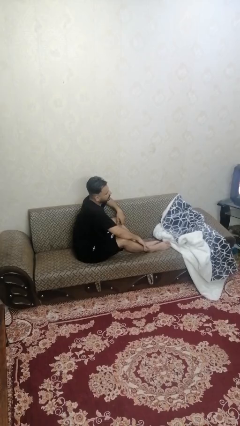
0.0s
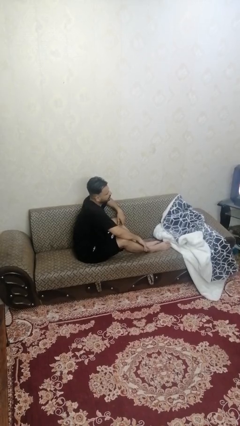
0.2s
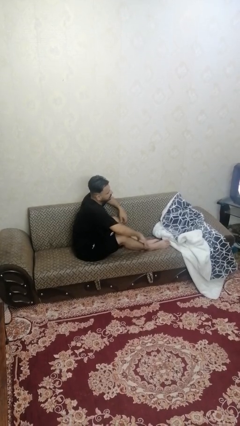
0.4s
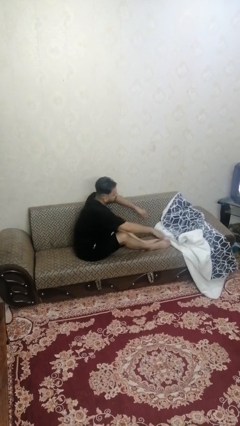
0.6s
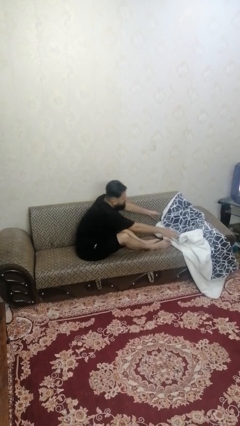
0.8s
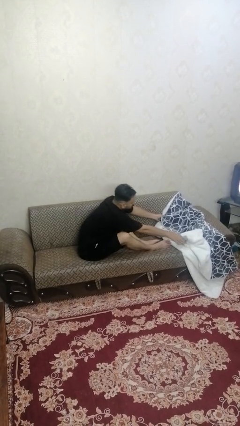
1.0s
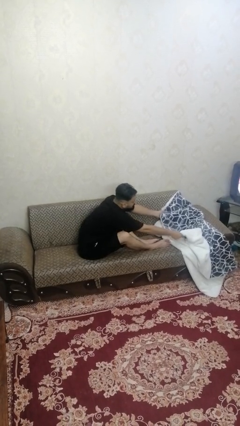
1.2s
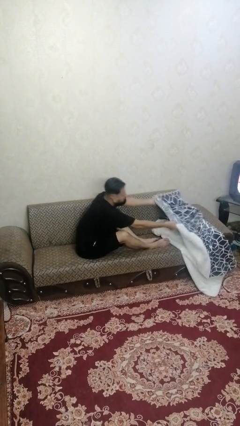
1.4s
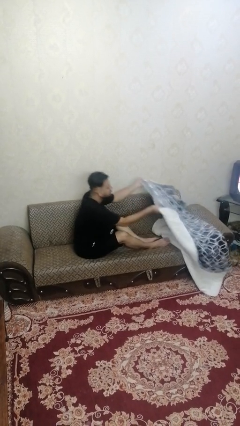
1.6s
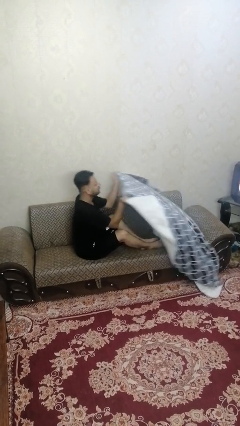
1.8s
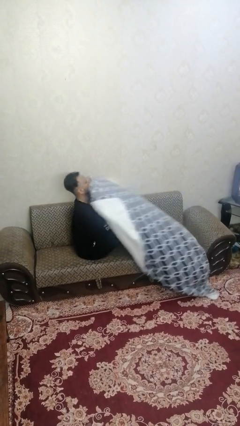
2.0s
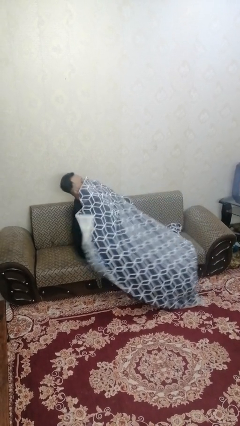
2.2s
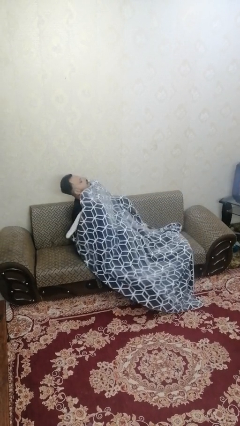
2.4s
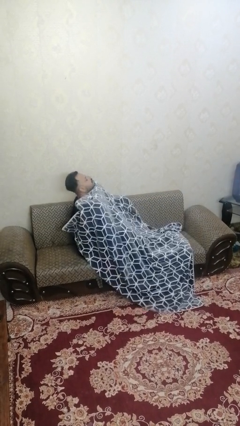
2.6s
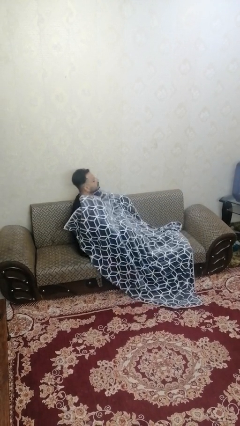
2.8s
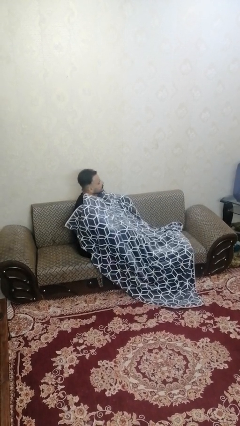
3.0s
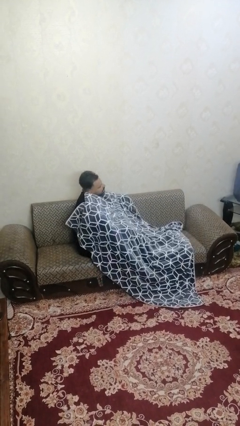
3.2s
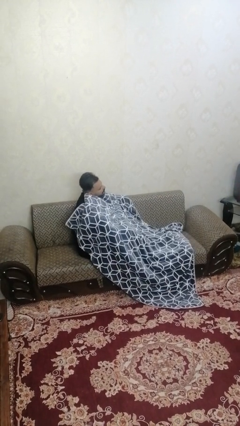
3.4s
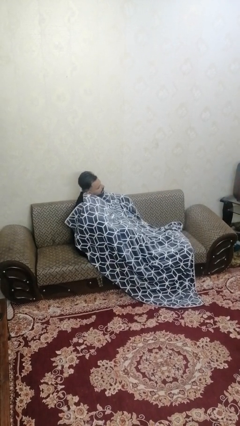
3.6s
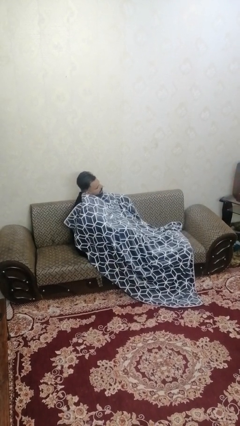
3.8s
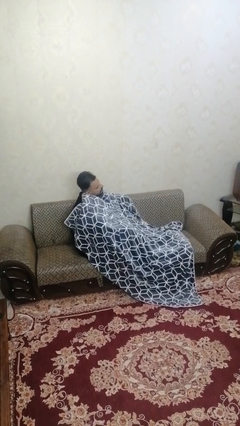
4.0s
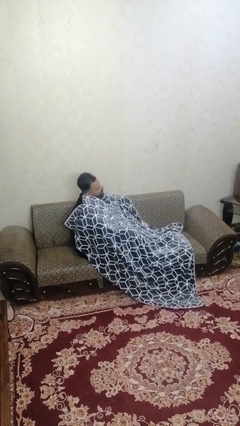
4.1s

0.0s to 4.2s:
person covers with blanket

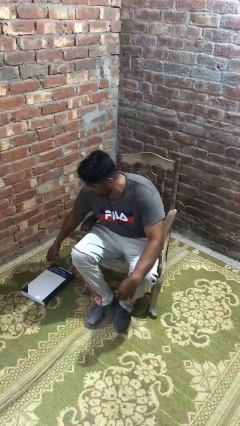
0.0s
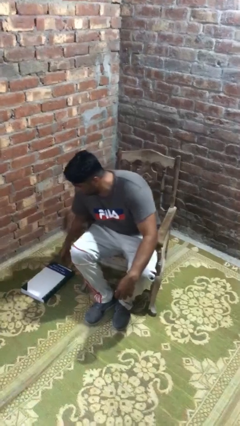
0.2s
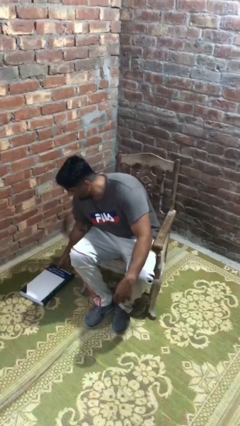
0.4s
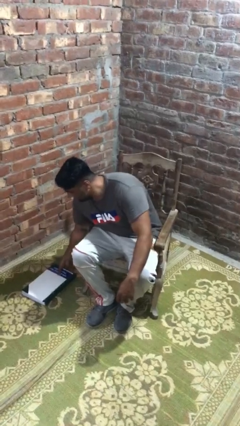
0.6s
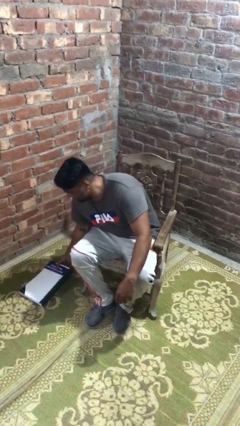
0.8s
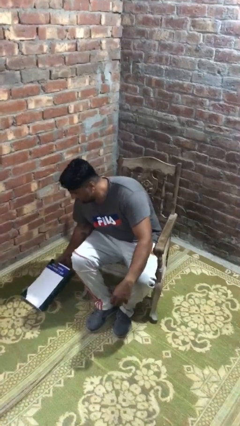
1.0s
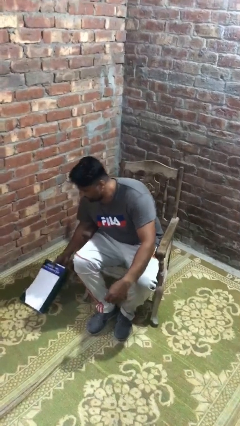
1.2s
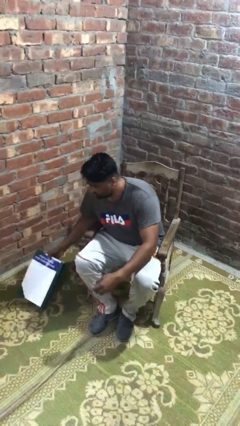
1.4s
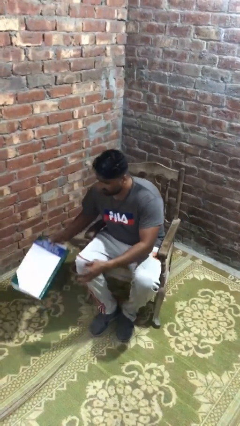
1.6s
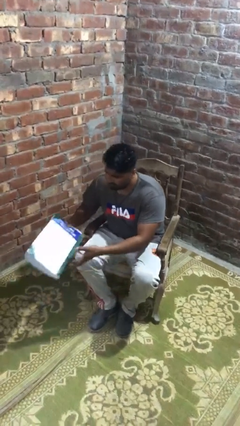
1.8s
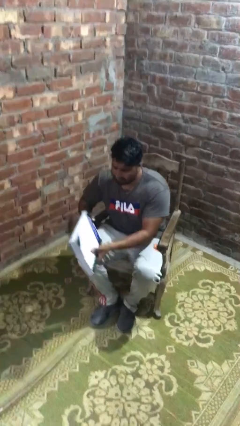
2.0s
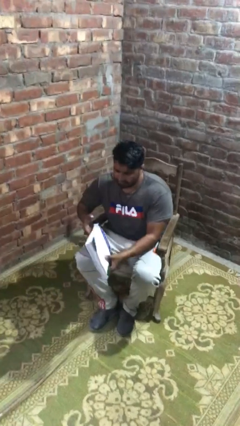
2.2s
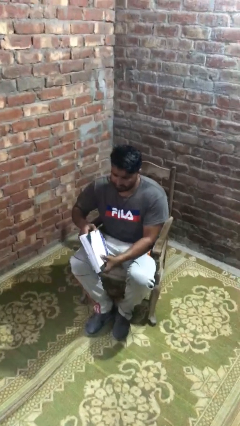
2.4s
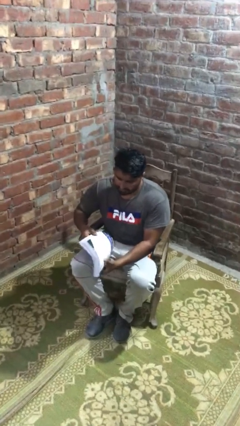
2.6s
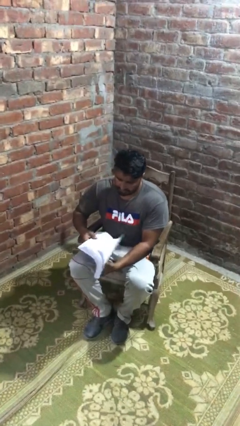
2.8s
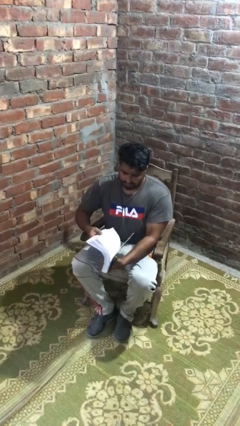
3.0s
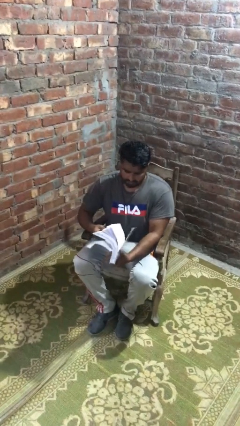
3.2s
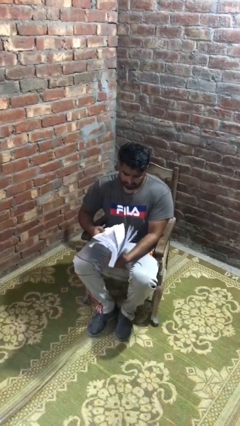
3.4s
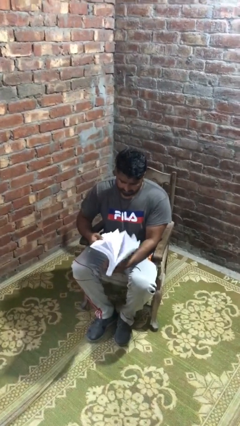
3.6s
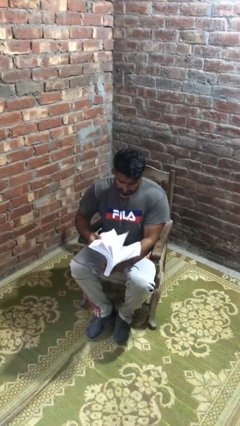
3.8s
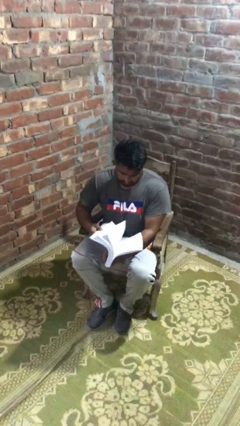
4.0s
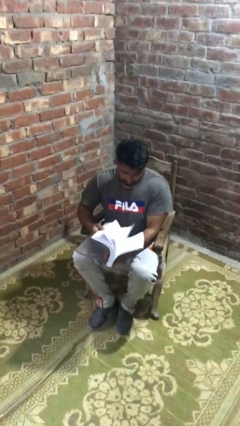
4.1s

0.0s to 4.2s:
person picks up object from floor

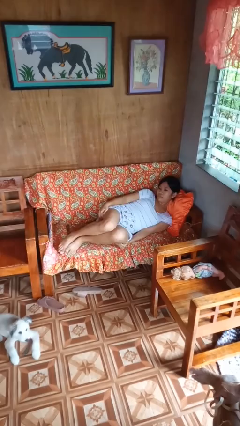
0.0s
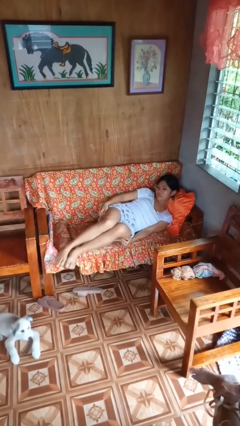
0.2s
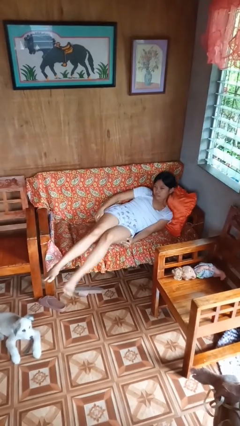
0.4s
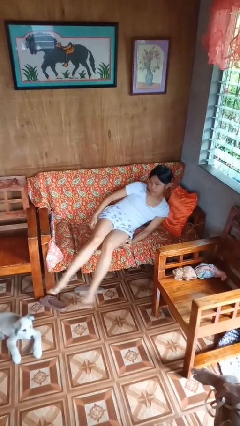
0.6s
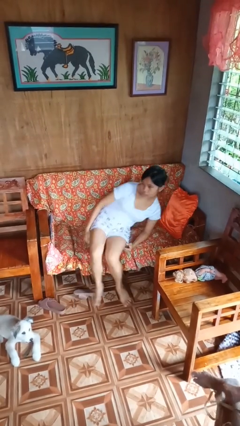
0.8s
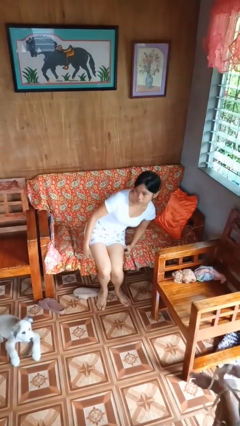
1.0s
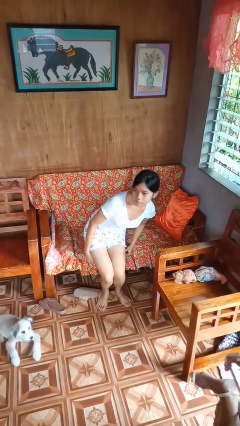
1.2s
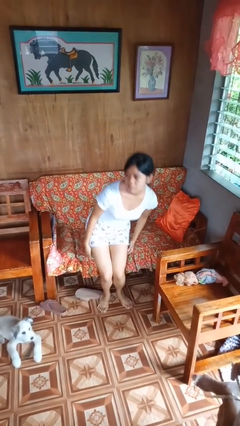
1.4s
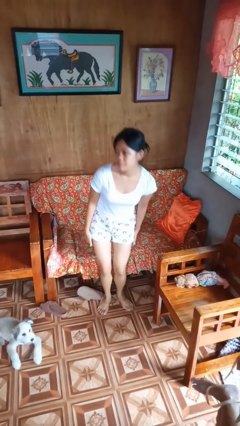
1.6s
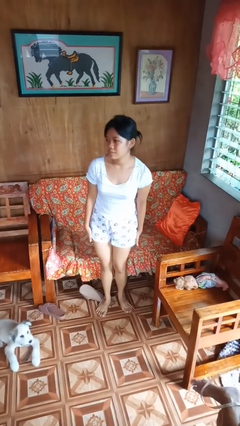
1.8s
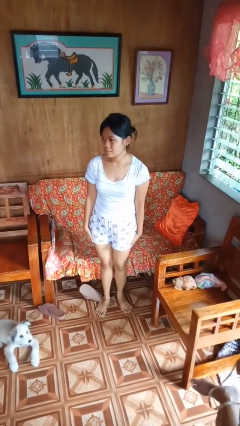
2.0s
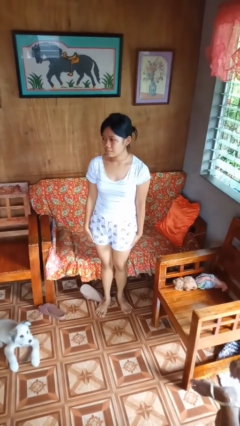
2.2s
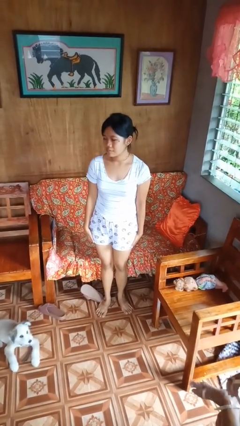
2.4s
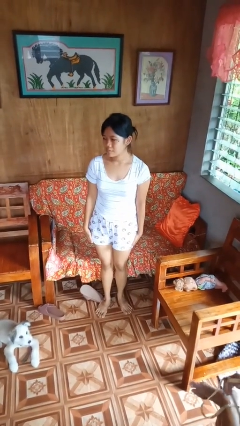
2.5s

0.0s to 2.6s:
person stands up

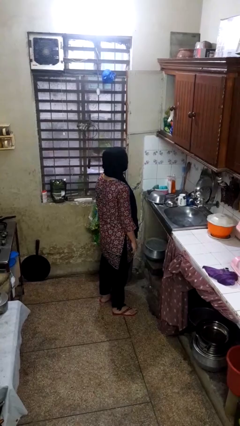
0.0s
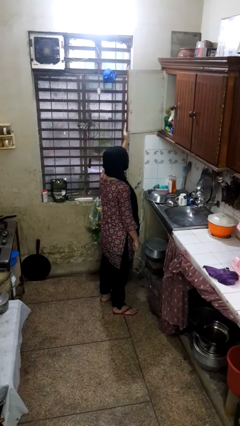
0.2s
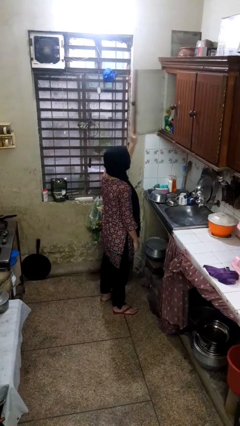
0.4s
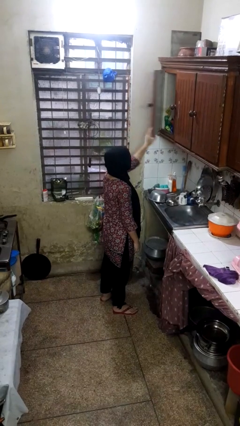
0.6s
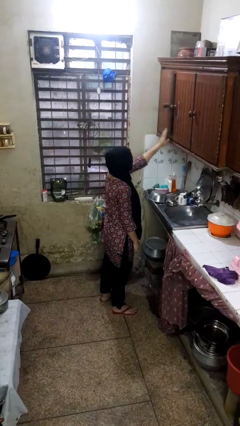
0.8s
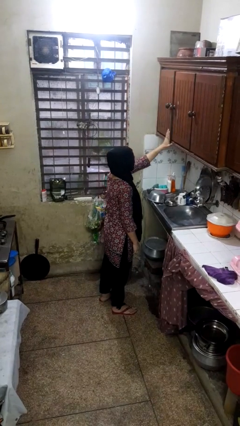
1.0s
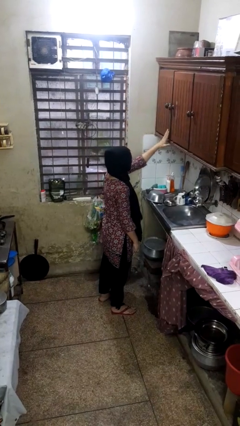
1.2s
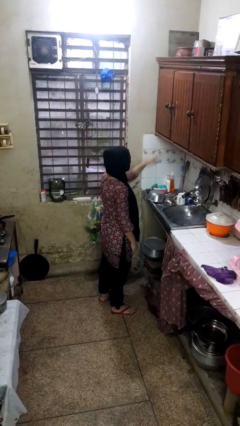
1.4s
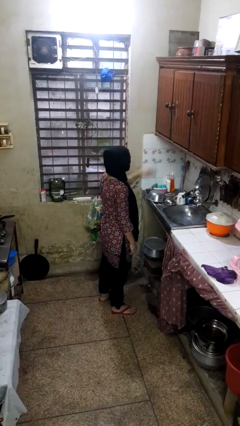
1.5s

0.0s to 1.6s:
person closes cabinet

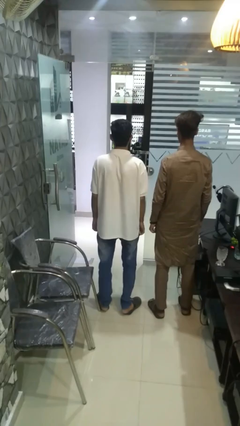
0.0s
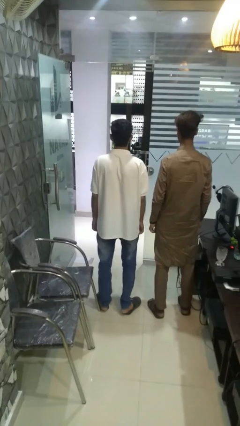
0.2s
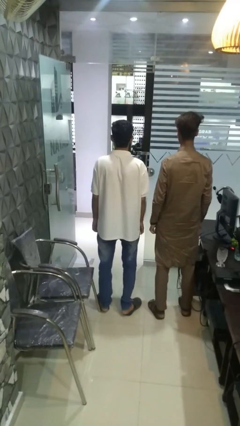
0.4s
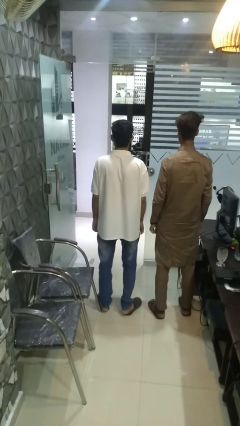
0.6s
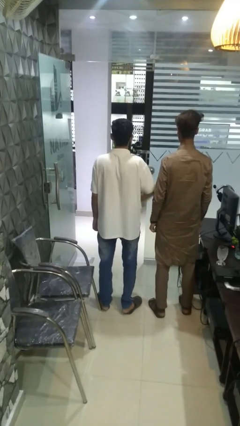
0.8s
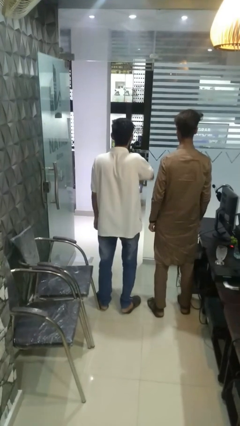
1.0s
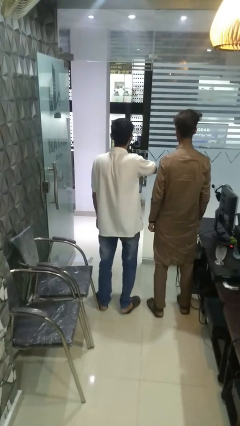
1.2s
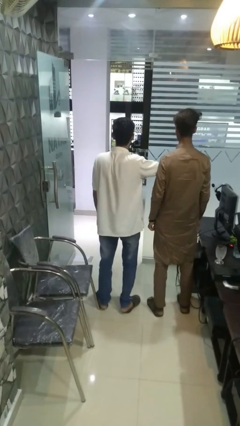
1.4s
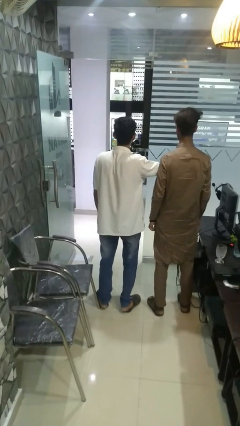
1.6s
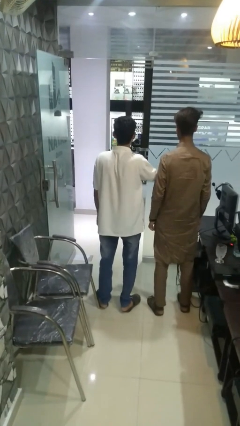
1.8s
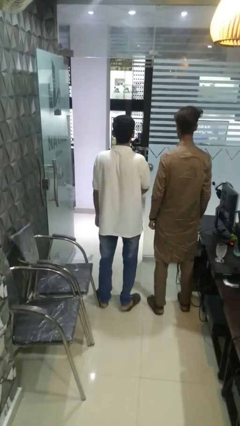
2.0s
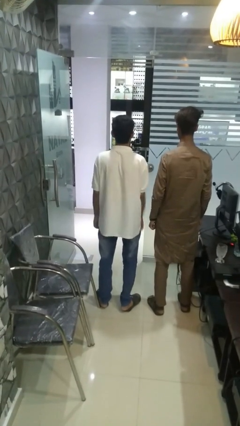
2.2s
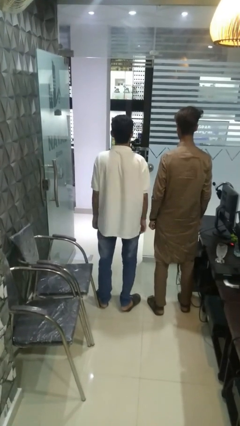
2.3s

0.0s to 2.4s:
person nudges person with elbow

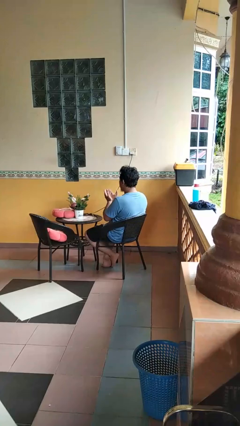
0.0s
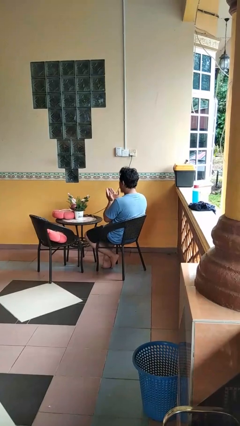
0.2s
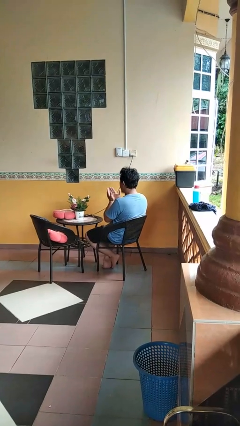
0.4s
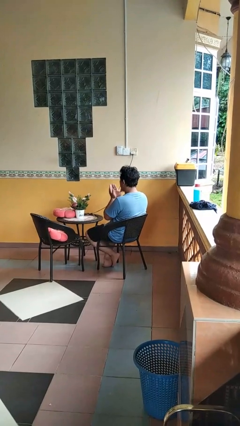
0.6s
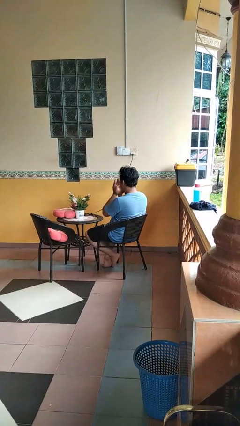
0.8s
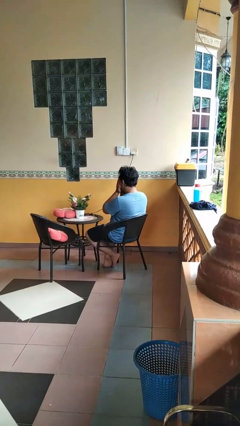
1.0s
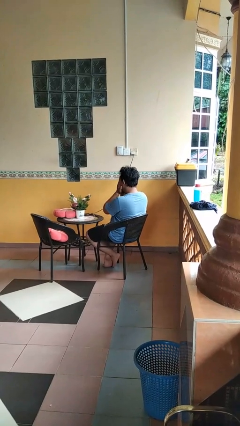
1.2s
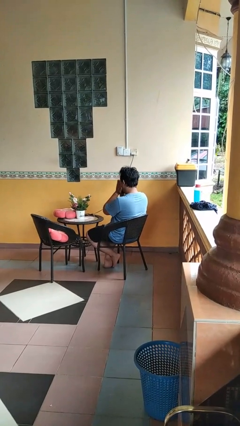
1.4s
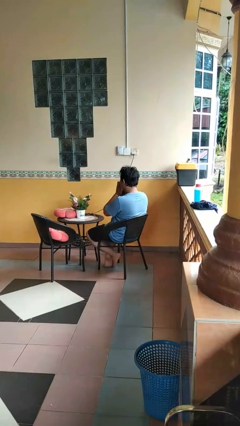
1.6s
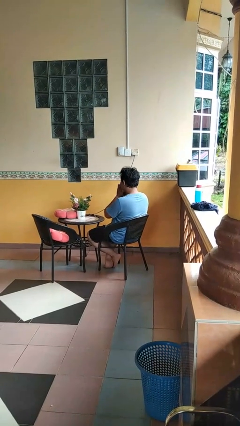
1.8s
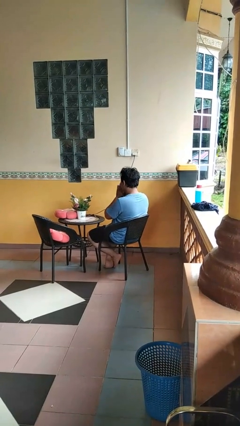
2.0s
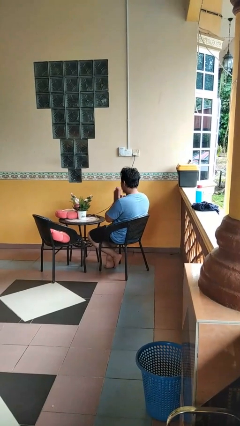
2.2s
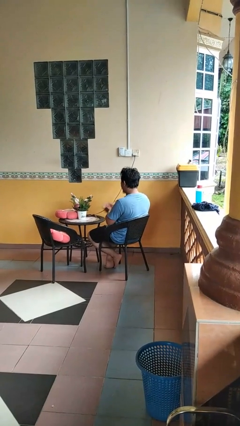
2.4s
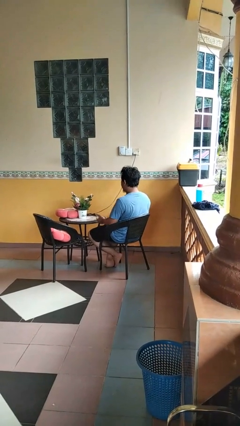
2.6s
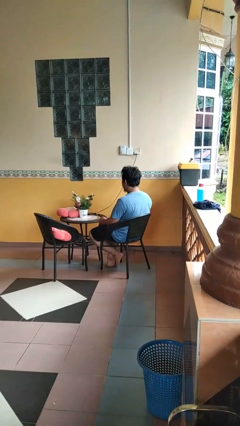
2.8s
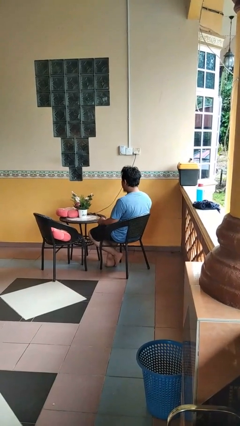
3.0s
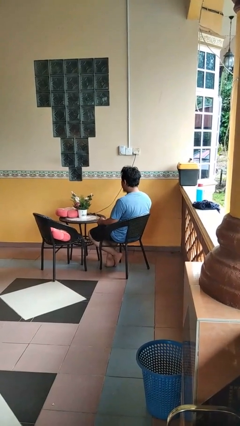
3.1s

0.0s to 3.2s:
person prays
